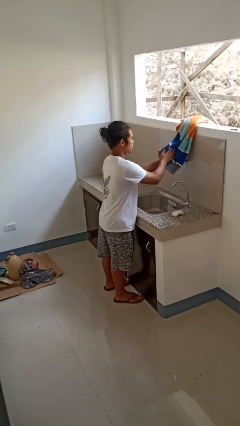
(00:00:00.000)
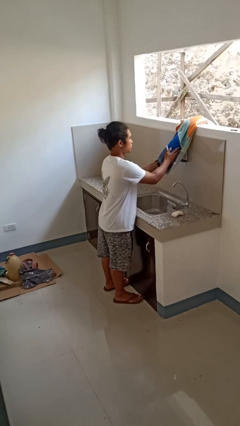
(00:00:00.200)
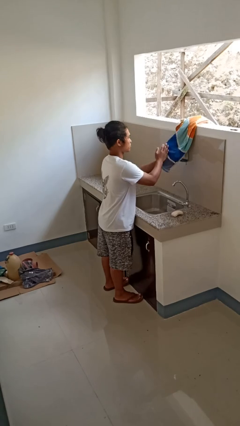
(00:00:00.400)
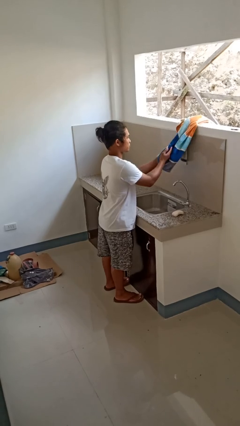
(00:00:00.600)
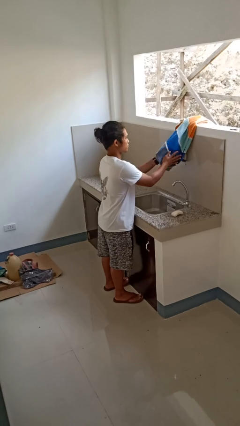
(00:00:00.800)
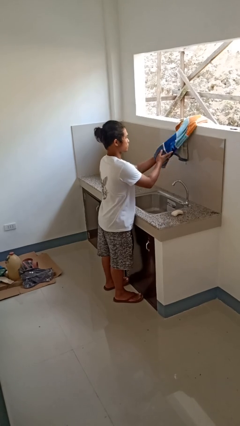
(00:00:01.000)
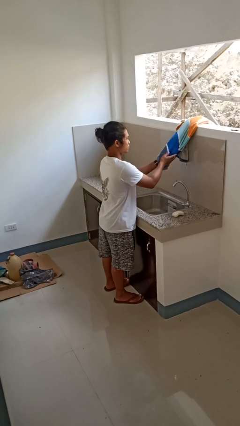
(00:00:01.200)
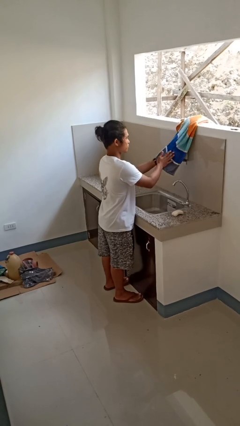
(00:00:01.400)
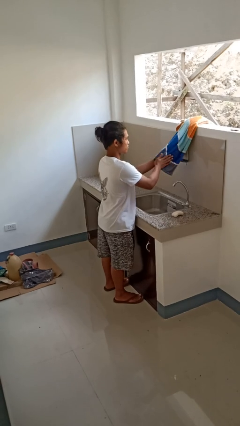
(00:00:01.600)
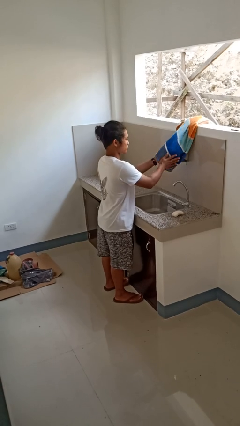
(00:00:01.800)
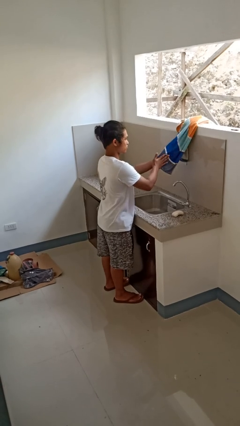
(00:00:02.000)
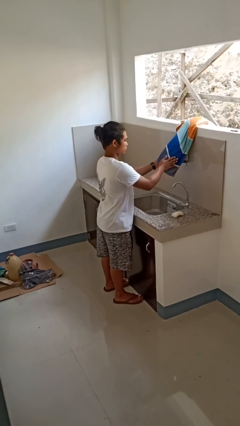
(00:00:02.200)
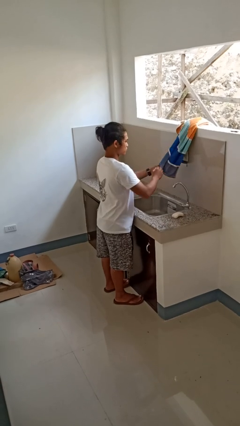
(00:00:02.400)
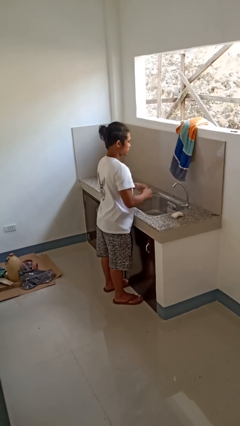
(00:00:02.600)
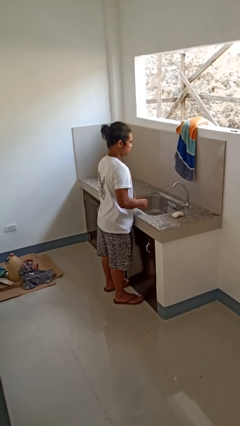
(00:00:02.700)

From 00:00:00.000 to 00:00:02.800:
person dries hands with towel

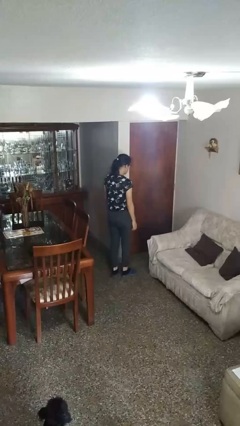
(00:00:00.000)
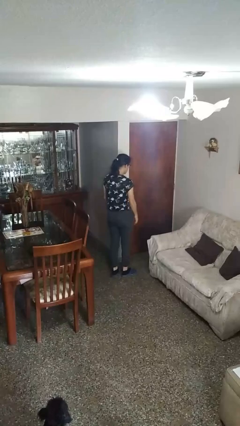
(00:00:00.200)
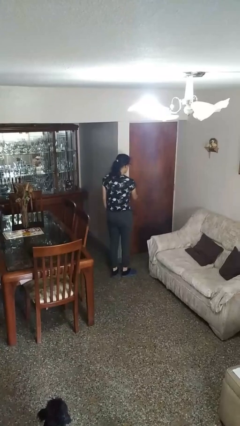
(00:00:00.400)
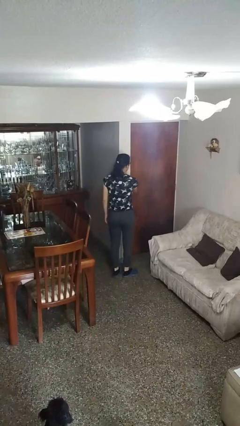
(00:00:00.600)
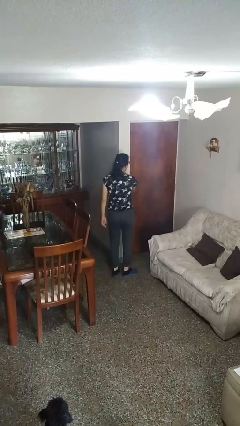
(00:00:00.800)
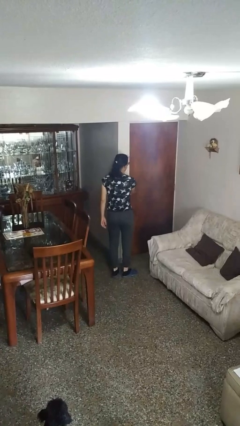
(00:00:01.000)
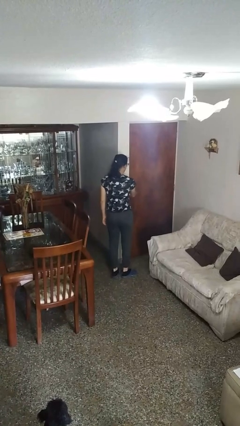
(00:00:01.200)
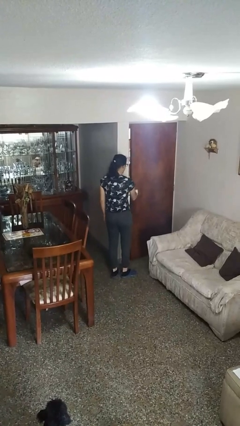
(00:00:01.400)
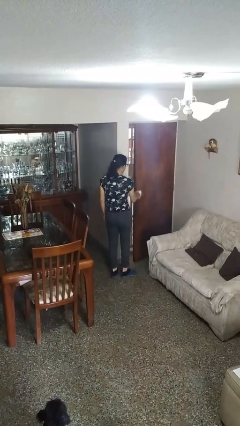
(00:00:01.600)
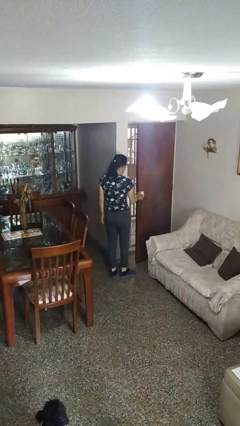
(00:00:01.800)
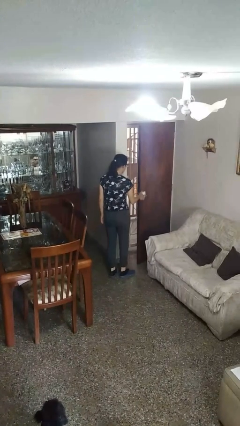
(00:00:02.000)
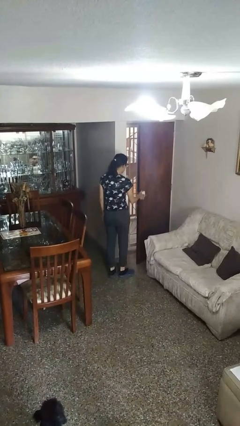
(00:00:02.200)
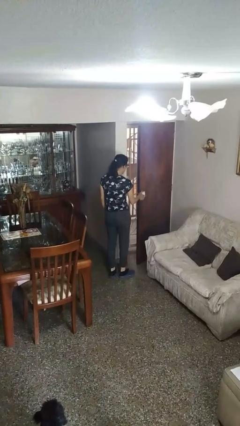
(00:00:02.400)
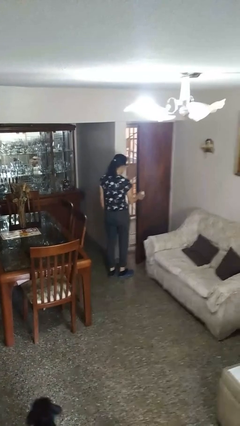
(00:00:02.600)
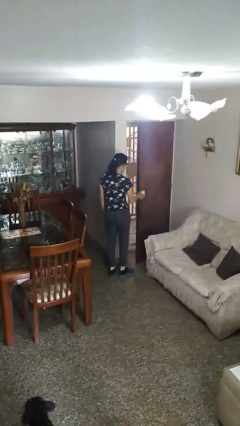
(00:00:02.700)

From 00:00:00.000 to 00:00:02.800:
person opens facility door

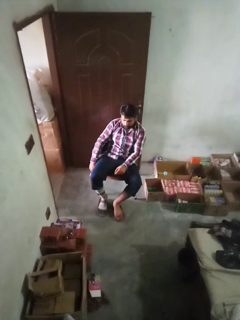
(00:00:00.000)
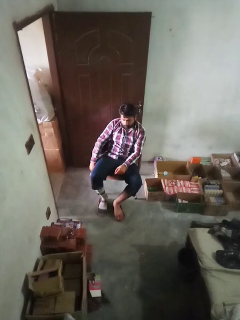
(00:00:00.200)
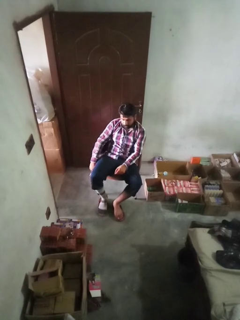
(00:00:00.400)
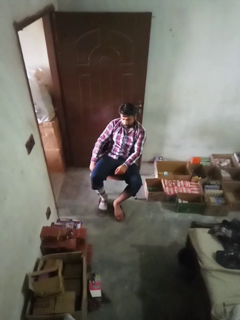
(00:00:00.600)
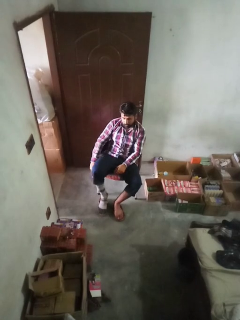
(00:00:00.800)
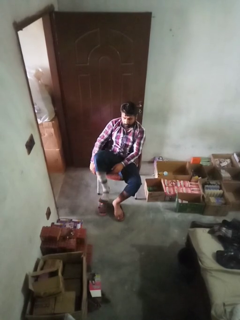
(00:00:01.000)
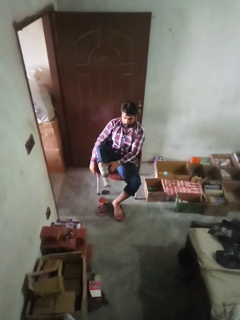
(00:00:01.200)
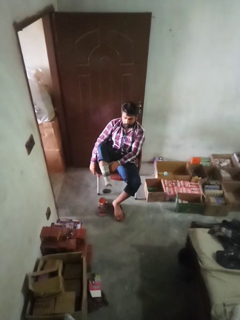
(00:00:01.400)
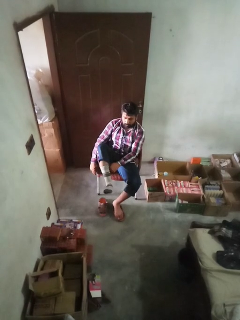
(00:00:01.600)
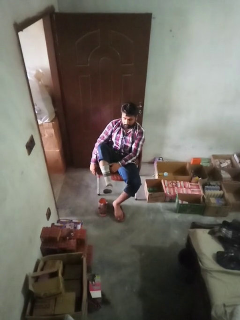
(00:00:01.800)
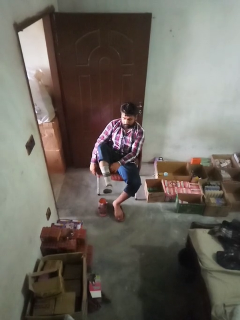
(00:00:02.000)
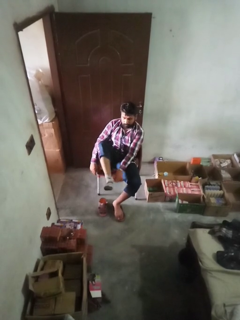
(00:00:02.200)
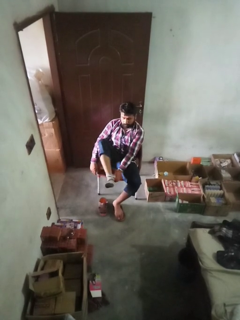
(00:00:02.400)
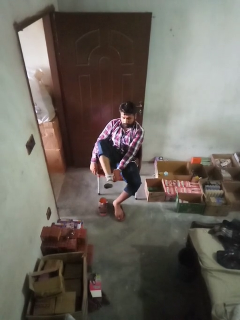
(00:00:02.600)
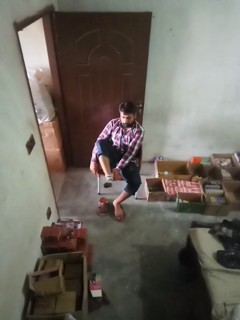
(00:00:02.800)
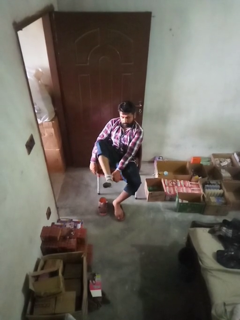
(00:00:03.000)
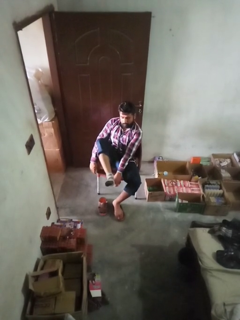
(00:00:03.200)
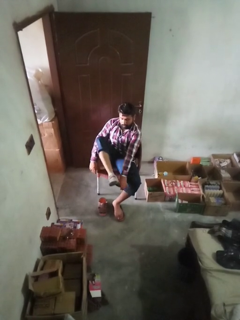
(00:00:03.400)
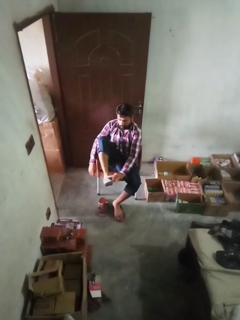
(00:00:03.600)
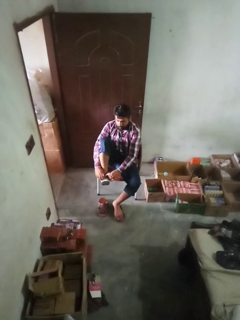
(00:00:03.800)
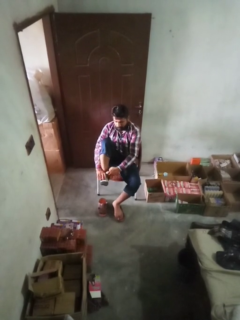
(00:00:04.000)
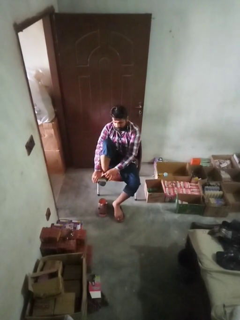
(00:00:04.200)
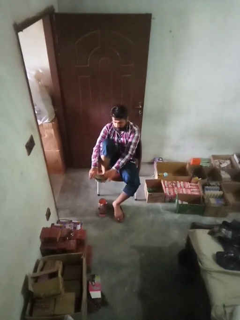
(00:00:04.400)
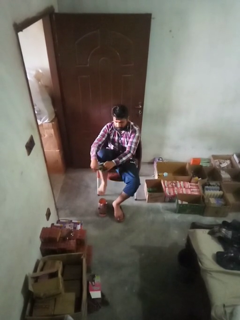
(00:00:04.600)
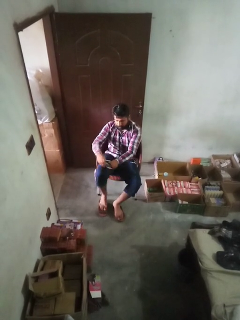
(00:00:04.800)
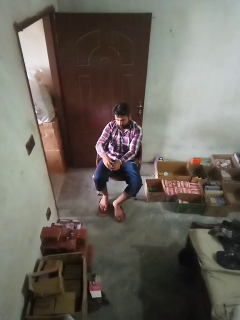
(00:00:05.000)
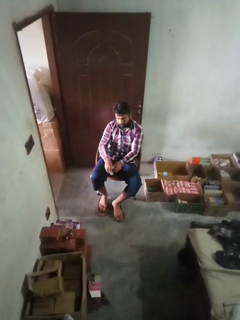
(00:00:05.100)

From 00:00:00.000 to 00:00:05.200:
person takes off socks

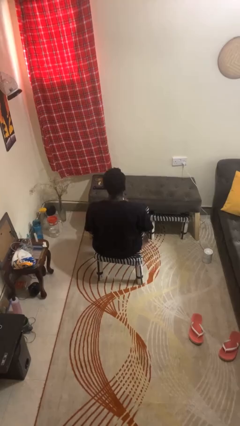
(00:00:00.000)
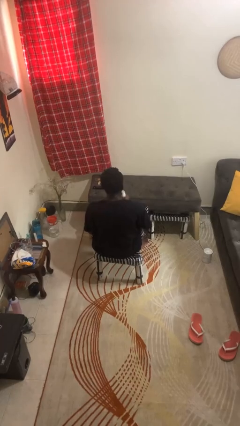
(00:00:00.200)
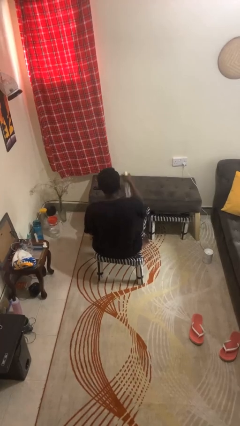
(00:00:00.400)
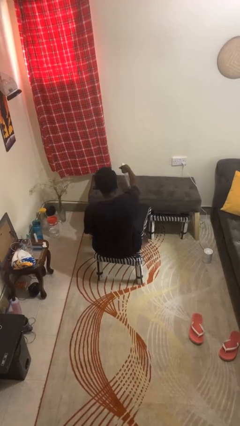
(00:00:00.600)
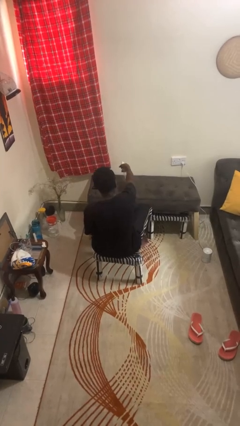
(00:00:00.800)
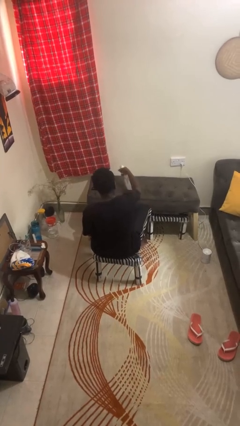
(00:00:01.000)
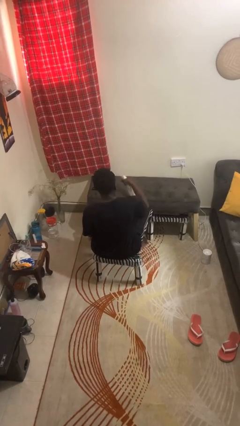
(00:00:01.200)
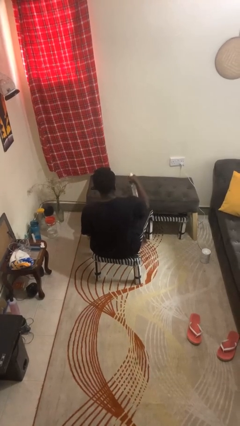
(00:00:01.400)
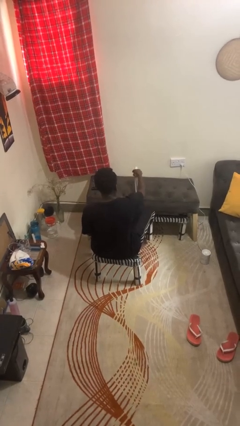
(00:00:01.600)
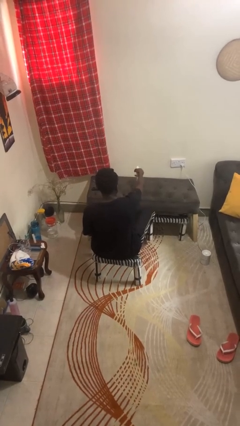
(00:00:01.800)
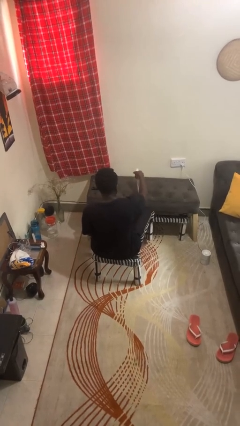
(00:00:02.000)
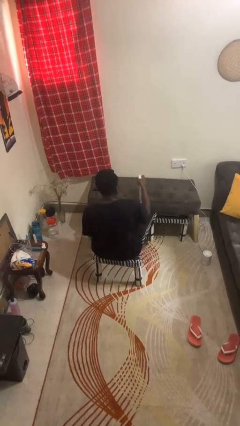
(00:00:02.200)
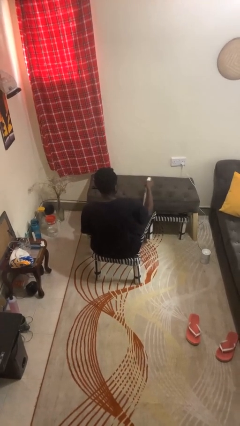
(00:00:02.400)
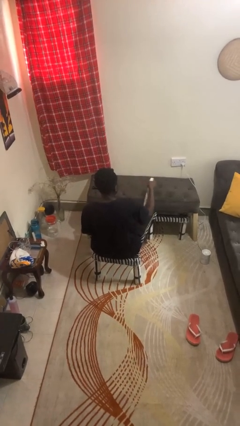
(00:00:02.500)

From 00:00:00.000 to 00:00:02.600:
person sprays from bottle

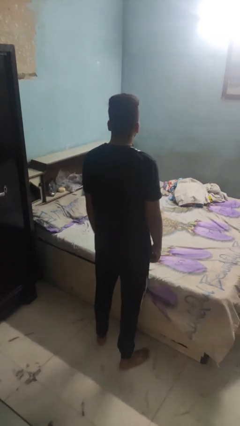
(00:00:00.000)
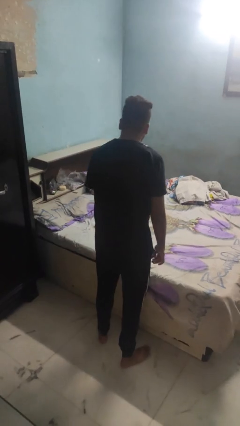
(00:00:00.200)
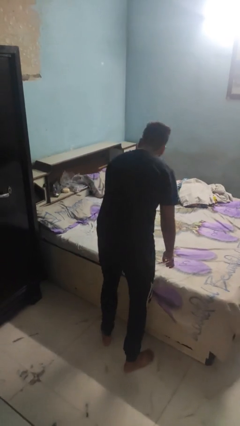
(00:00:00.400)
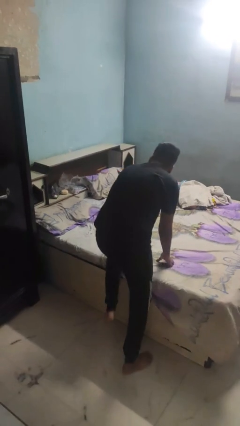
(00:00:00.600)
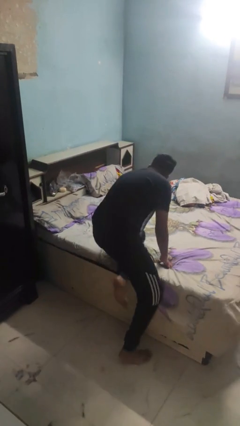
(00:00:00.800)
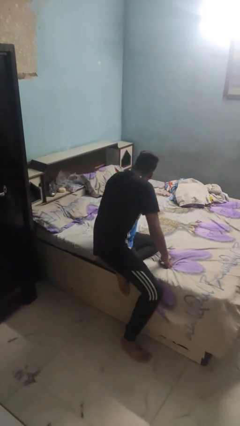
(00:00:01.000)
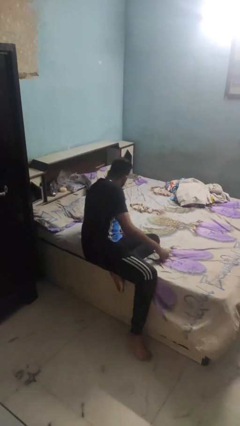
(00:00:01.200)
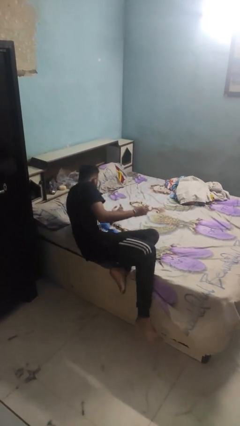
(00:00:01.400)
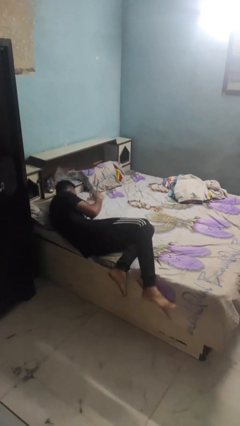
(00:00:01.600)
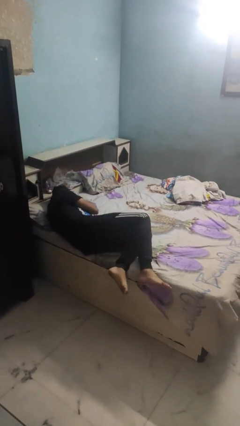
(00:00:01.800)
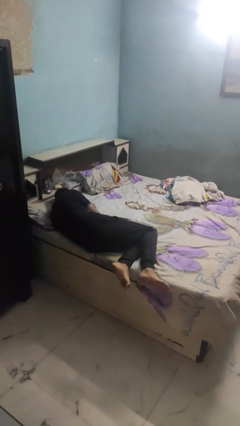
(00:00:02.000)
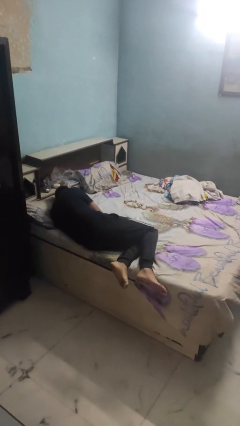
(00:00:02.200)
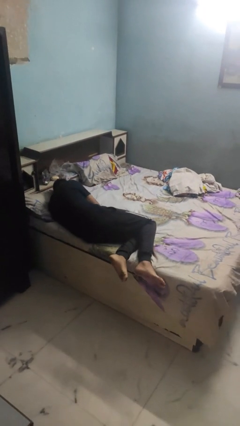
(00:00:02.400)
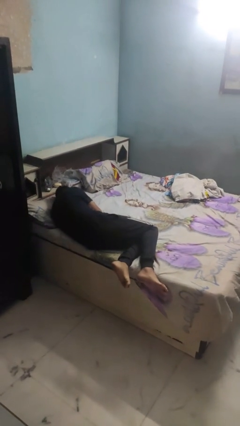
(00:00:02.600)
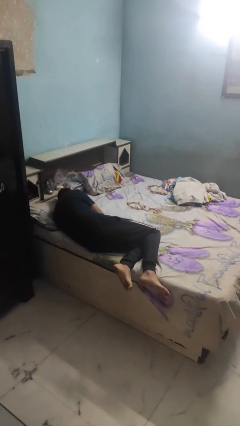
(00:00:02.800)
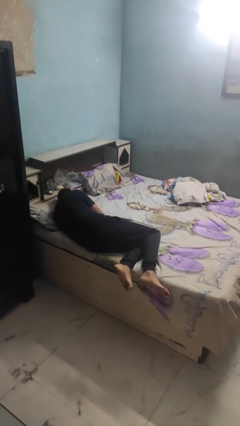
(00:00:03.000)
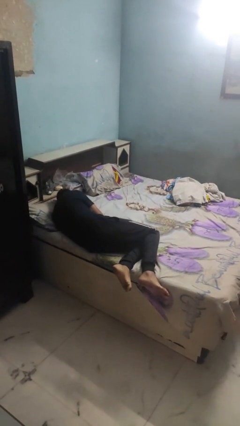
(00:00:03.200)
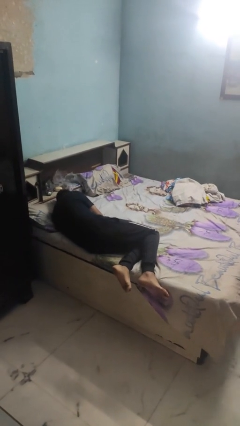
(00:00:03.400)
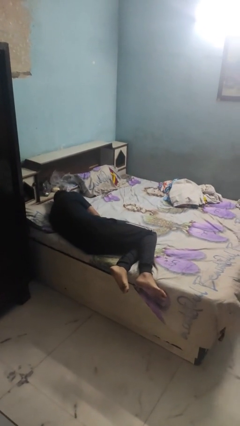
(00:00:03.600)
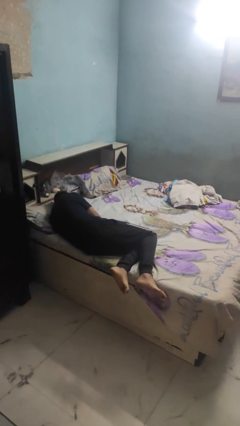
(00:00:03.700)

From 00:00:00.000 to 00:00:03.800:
person lies down on bed

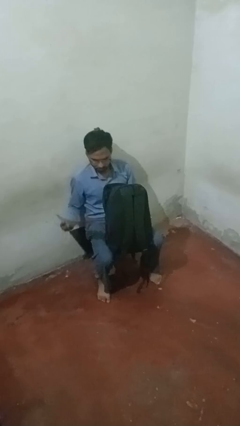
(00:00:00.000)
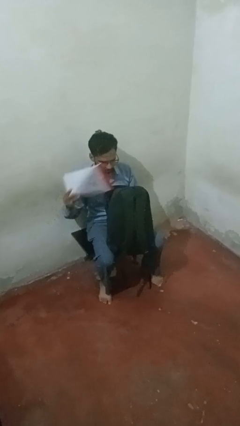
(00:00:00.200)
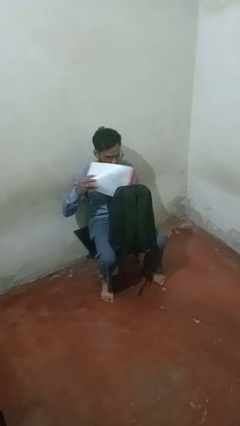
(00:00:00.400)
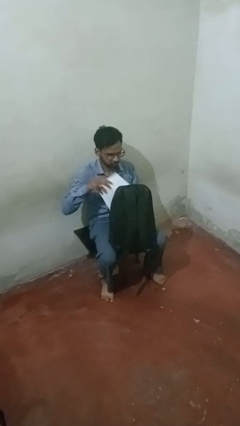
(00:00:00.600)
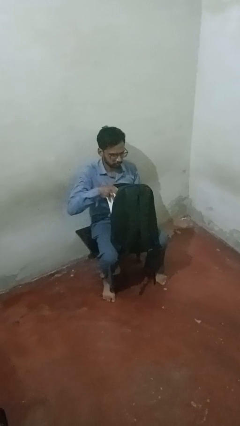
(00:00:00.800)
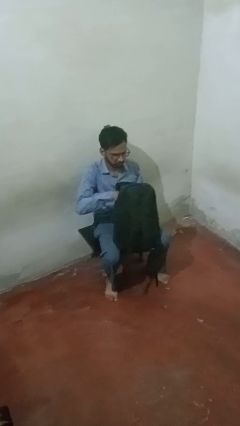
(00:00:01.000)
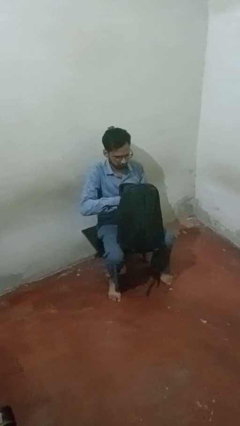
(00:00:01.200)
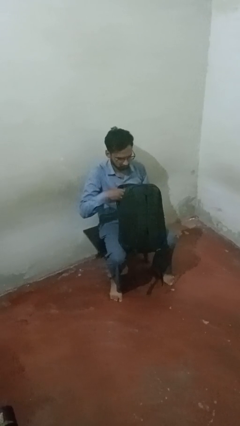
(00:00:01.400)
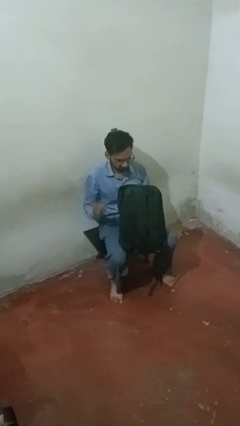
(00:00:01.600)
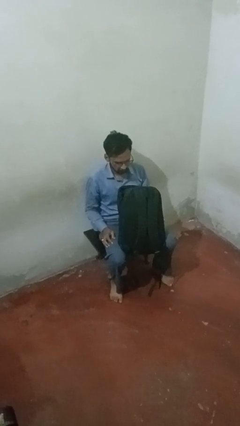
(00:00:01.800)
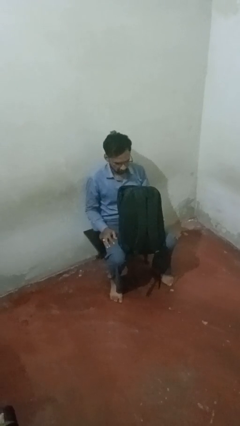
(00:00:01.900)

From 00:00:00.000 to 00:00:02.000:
person puts object into purse
